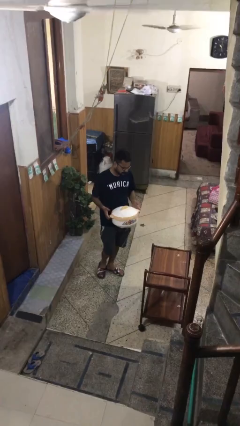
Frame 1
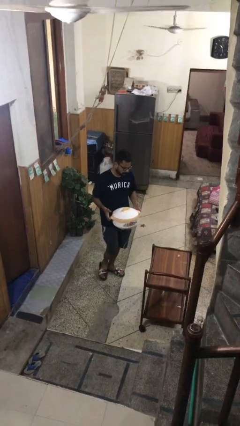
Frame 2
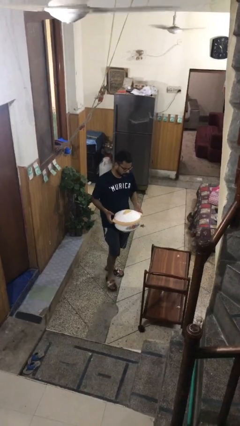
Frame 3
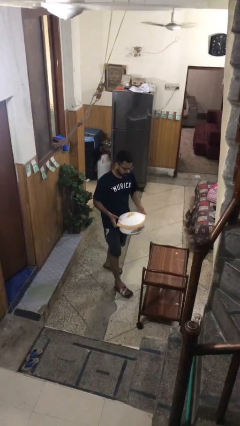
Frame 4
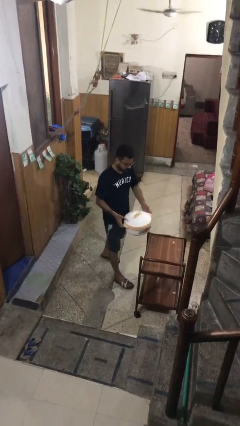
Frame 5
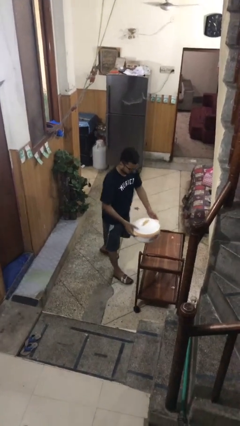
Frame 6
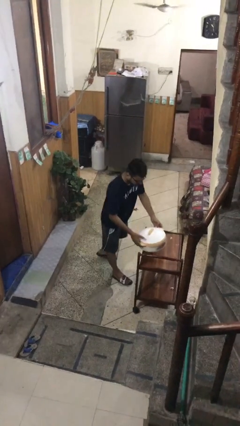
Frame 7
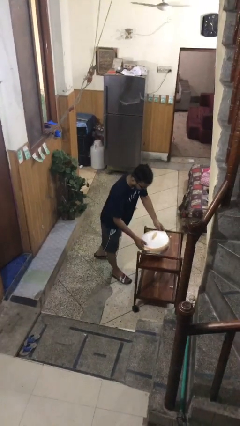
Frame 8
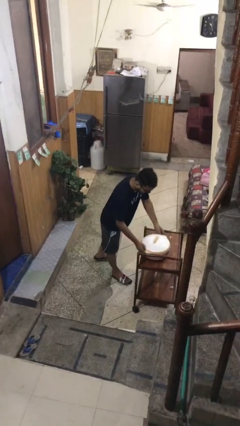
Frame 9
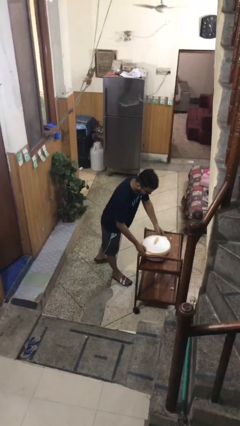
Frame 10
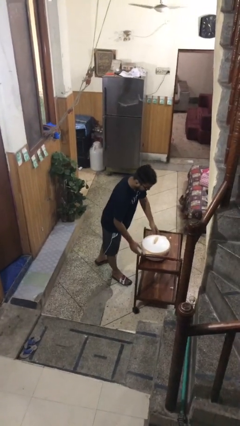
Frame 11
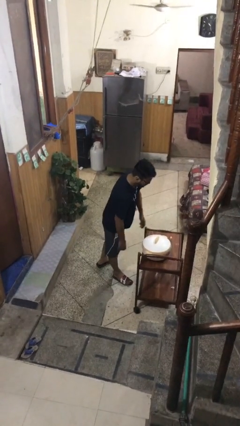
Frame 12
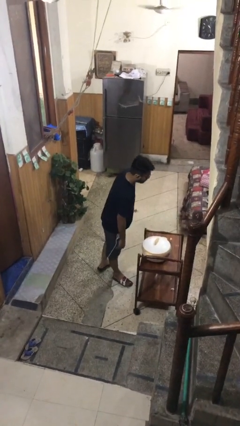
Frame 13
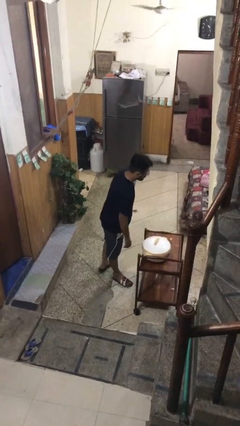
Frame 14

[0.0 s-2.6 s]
person puts down object on table

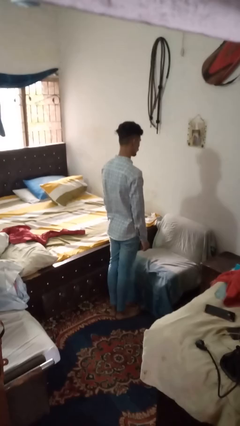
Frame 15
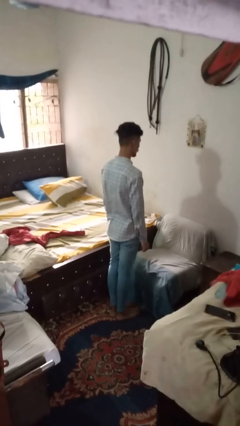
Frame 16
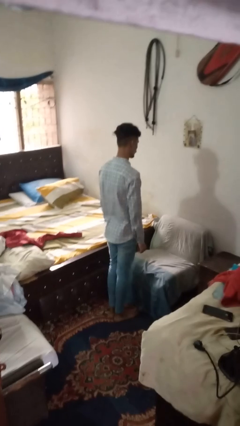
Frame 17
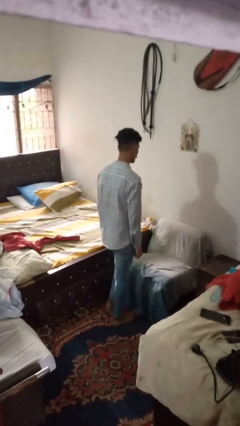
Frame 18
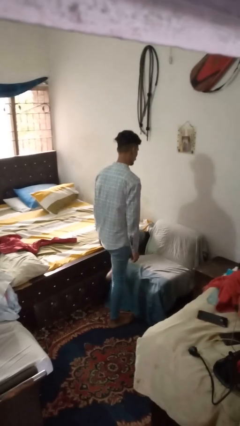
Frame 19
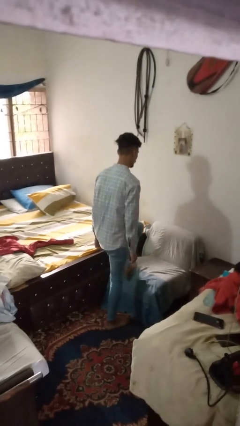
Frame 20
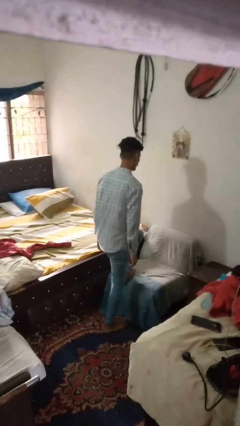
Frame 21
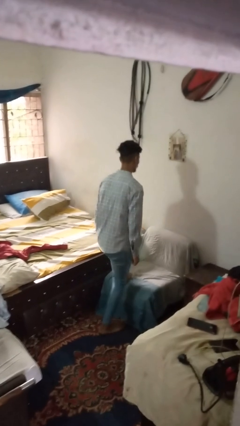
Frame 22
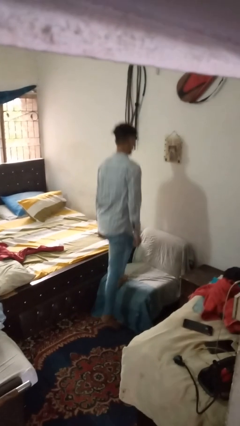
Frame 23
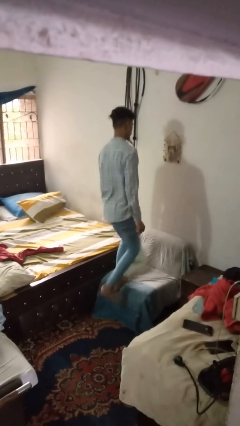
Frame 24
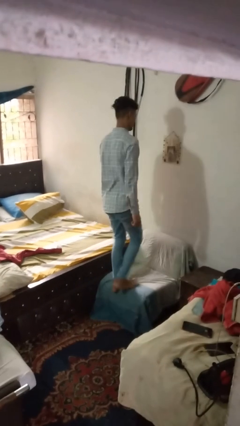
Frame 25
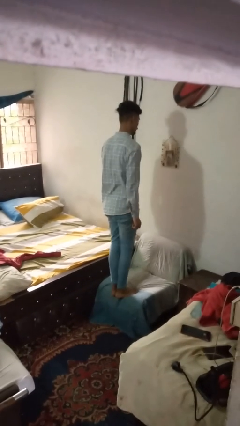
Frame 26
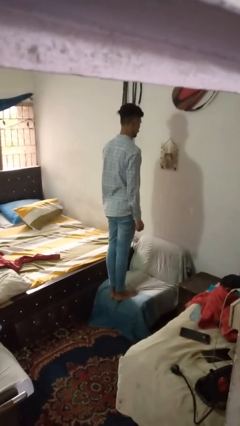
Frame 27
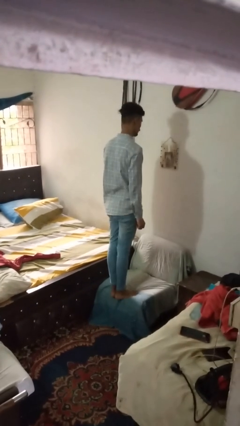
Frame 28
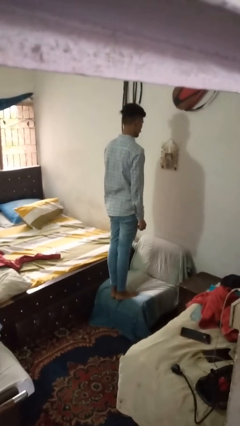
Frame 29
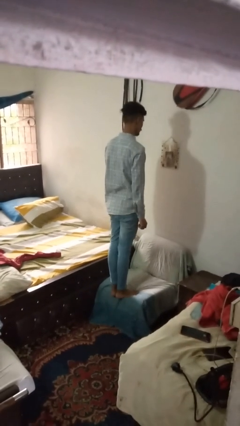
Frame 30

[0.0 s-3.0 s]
person climbs on couch

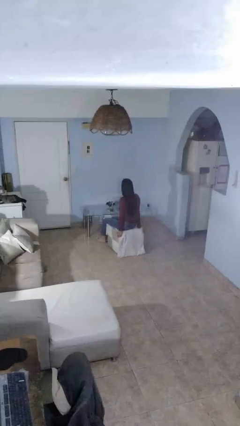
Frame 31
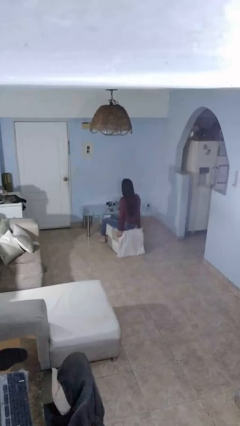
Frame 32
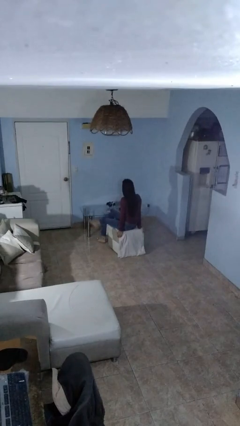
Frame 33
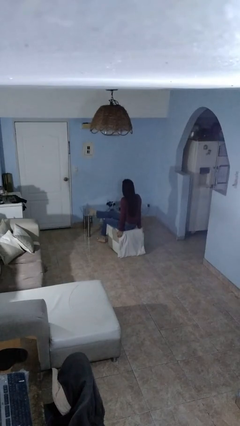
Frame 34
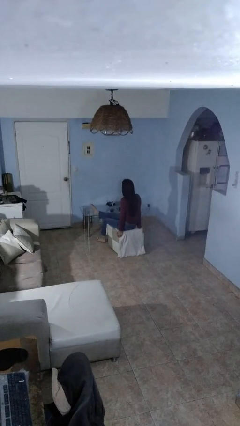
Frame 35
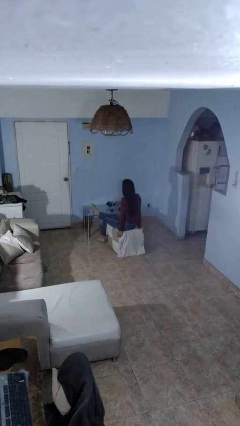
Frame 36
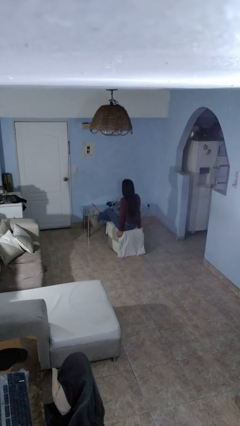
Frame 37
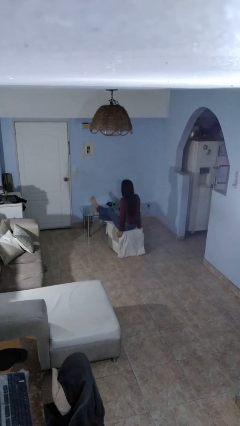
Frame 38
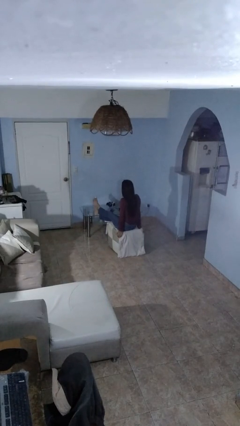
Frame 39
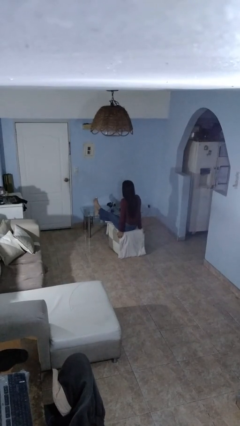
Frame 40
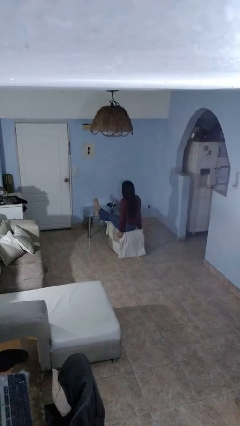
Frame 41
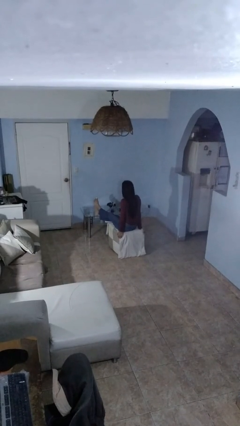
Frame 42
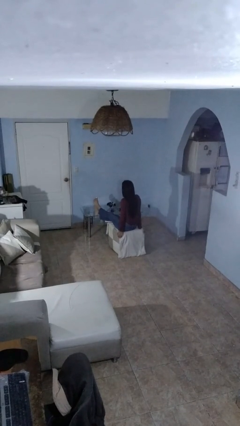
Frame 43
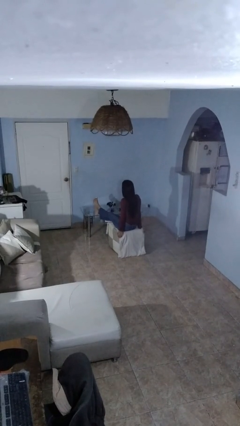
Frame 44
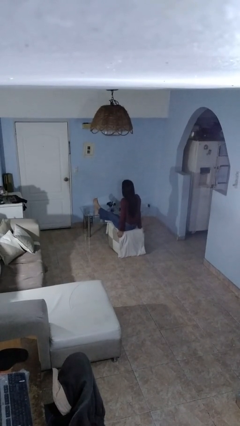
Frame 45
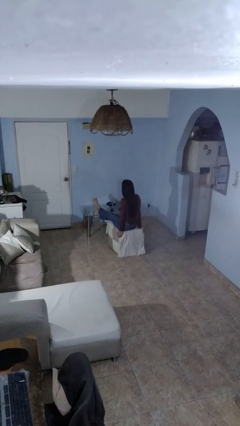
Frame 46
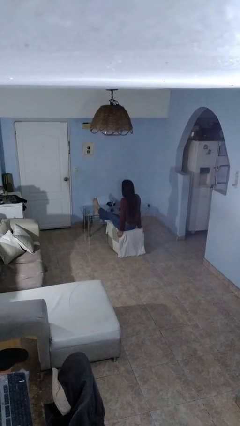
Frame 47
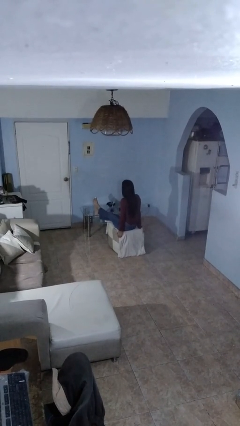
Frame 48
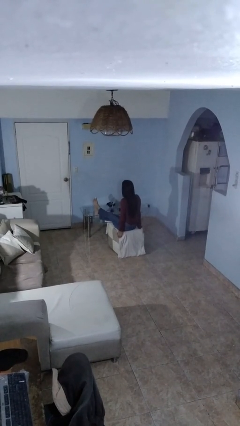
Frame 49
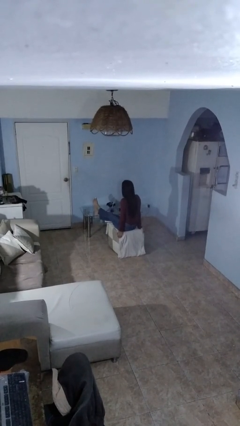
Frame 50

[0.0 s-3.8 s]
person puts feet up

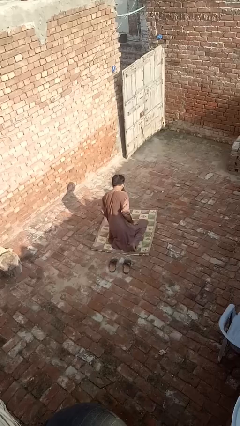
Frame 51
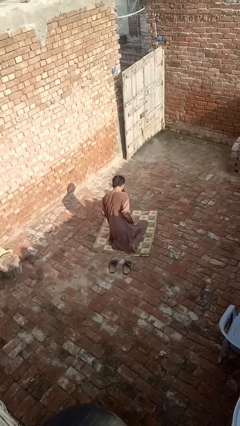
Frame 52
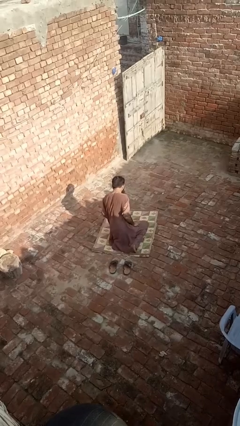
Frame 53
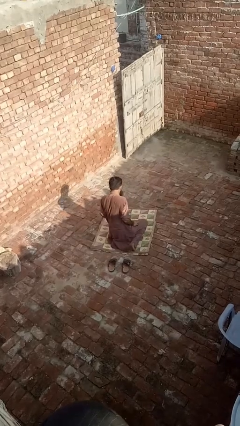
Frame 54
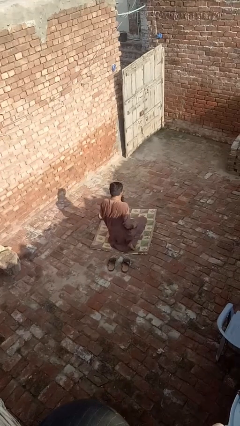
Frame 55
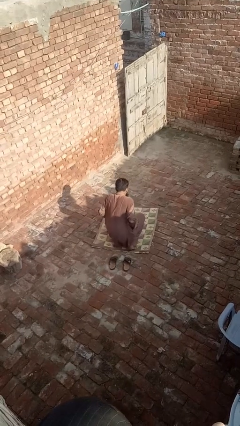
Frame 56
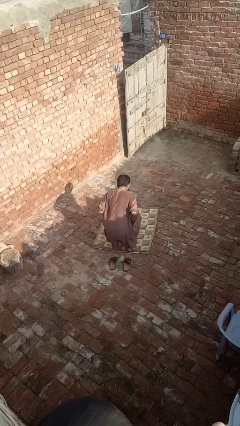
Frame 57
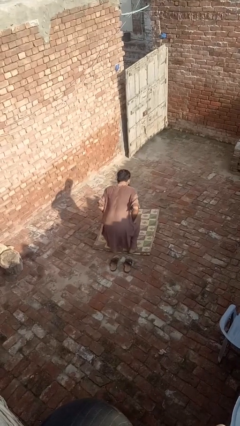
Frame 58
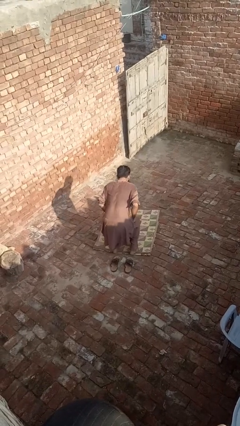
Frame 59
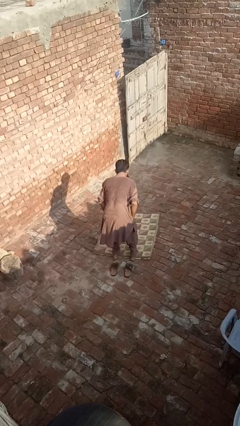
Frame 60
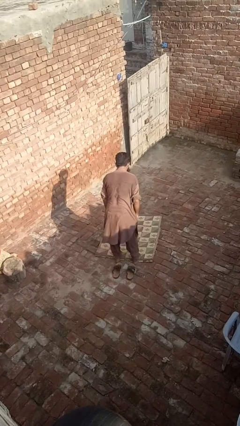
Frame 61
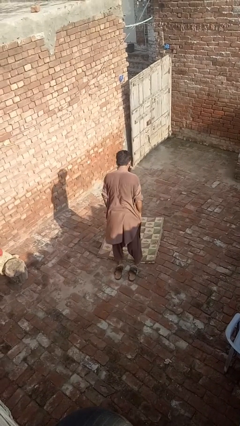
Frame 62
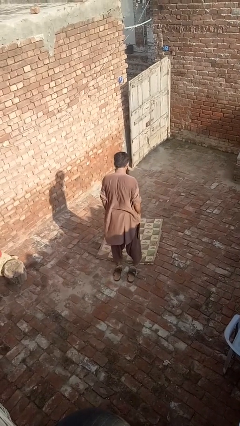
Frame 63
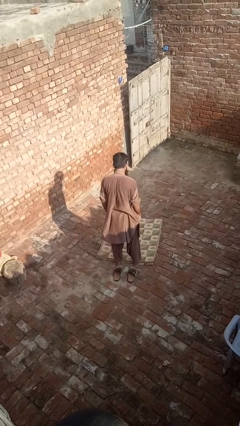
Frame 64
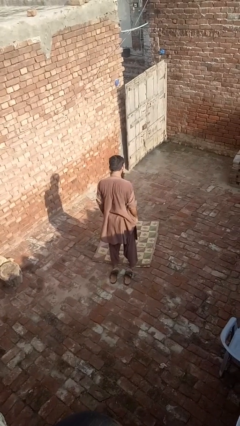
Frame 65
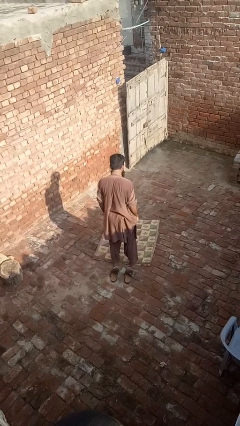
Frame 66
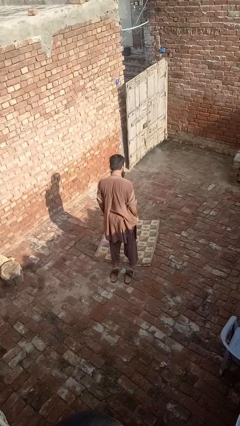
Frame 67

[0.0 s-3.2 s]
person stands up from floor

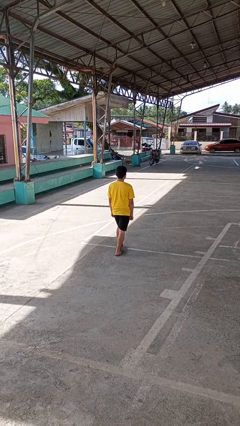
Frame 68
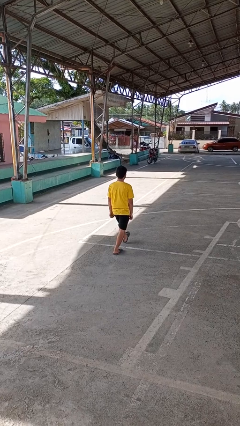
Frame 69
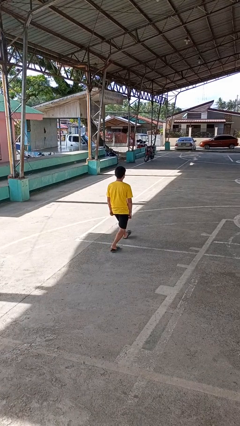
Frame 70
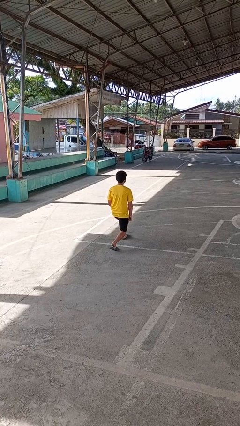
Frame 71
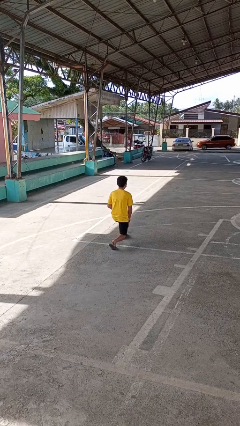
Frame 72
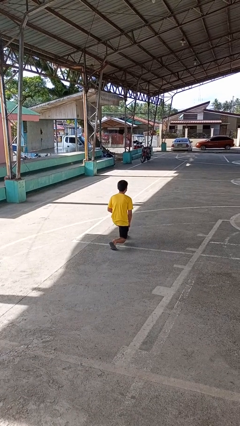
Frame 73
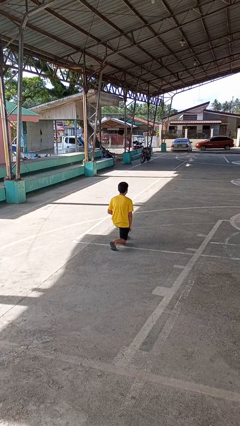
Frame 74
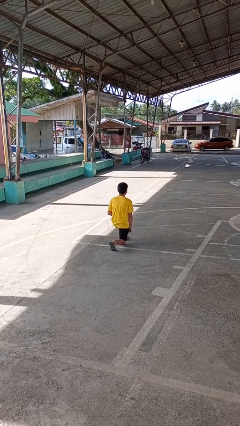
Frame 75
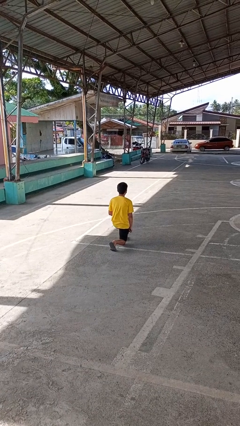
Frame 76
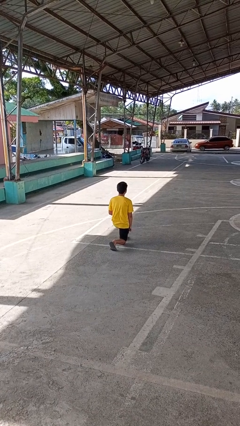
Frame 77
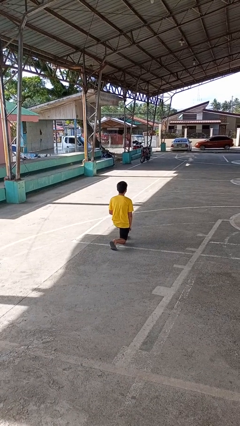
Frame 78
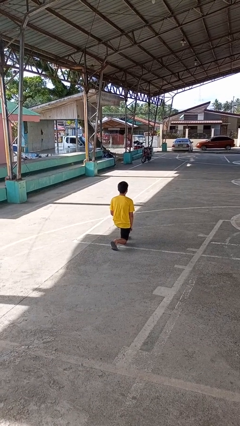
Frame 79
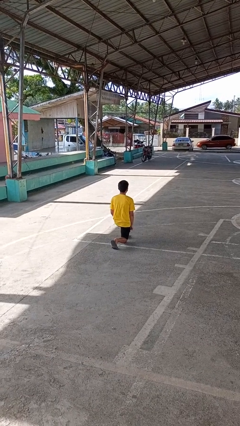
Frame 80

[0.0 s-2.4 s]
person kneels

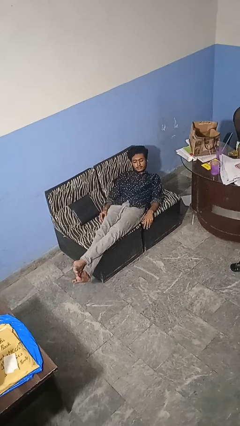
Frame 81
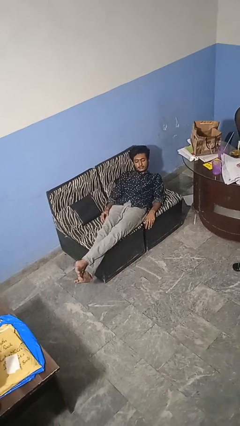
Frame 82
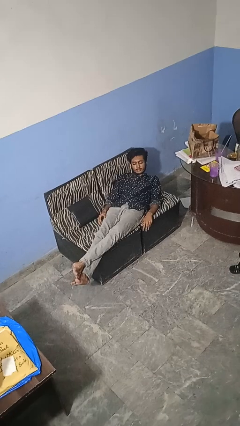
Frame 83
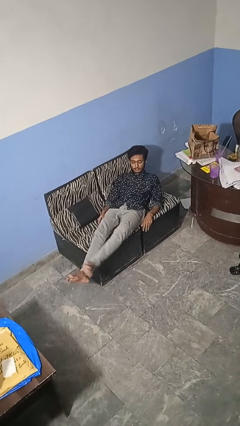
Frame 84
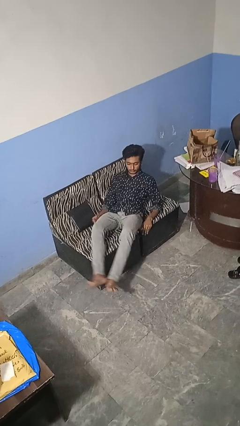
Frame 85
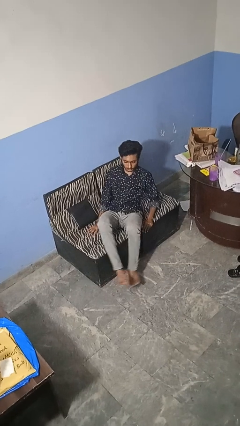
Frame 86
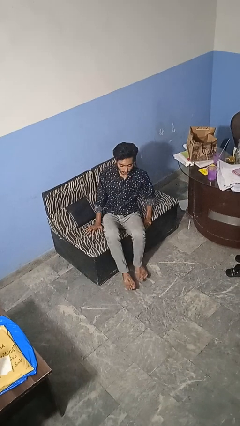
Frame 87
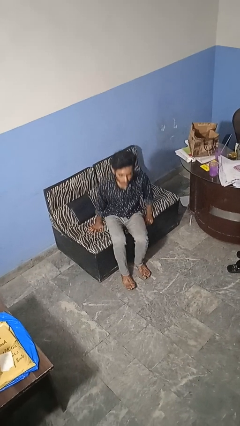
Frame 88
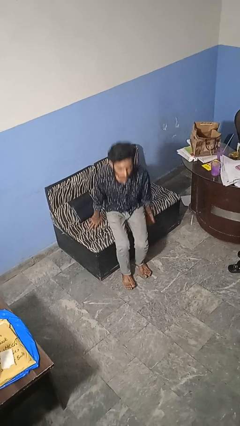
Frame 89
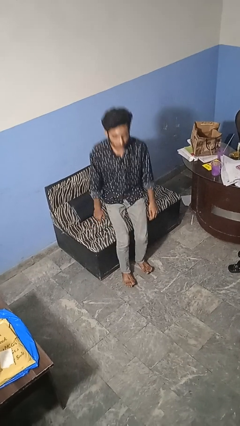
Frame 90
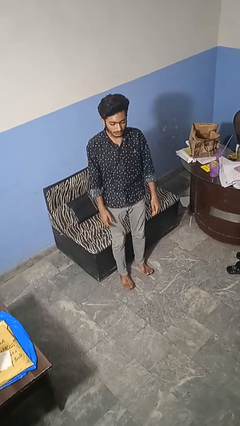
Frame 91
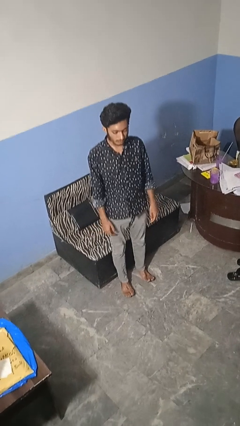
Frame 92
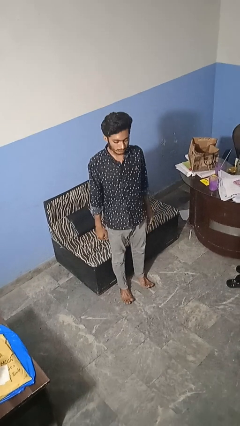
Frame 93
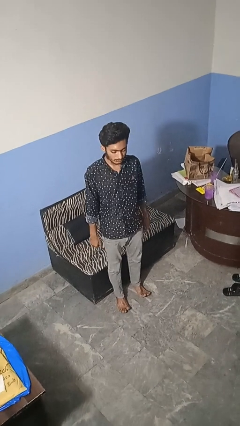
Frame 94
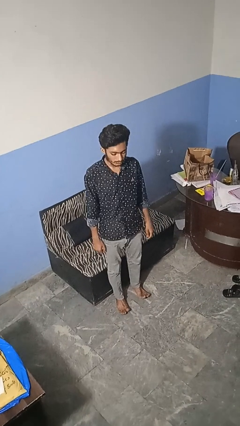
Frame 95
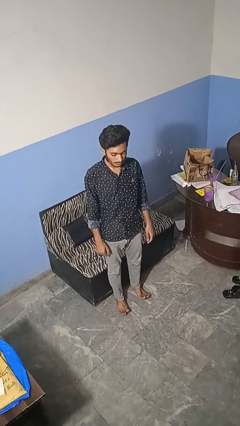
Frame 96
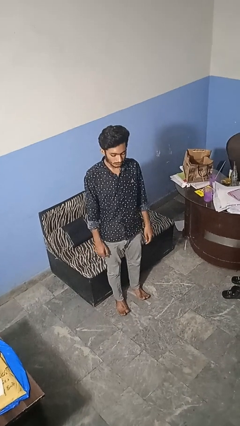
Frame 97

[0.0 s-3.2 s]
person stands up
